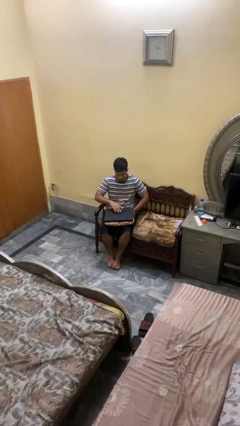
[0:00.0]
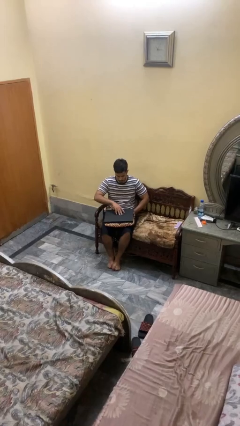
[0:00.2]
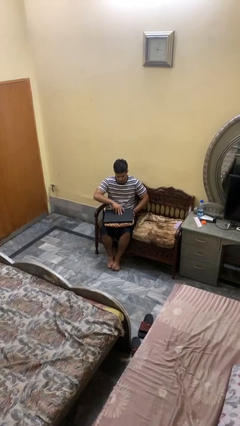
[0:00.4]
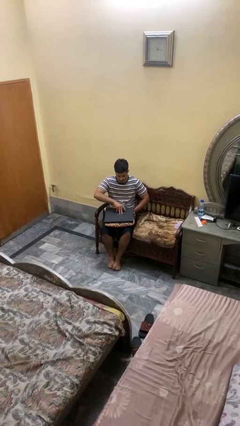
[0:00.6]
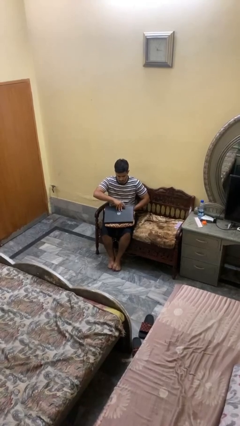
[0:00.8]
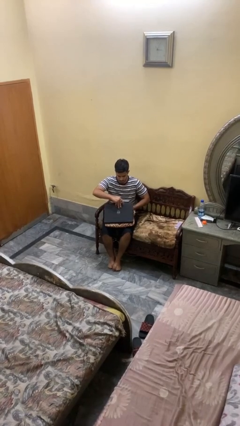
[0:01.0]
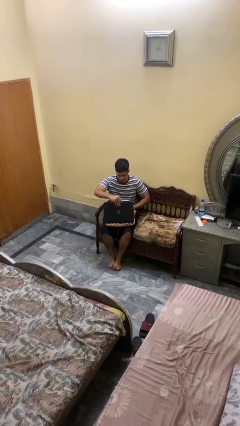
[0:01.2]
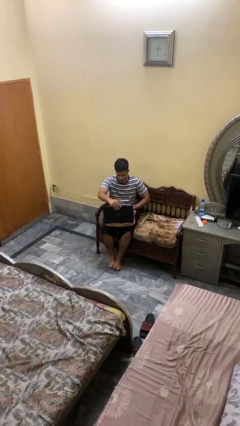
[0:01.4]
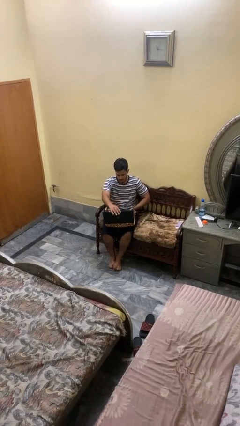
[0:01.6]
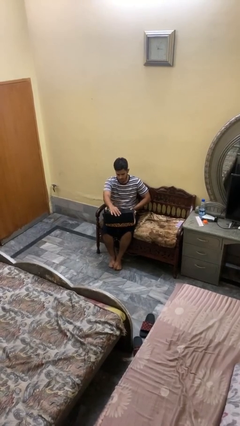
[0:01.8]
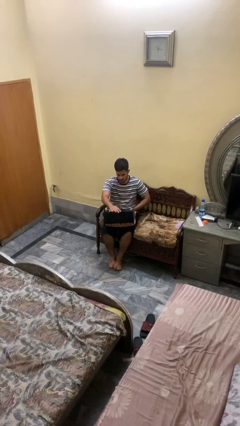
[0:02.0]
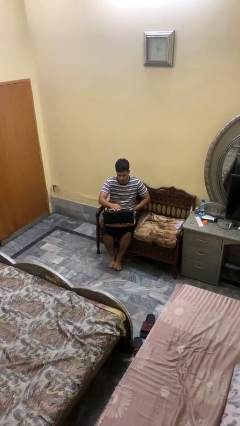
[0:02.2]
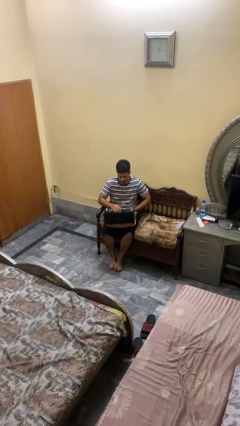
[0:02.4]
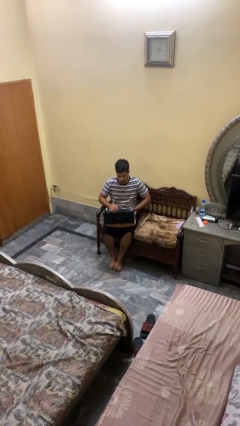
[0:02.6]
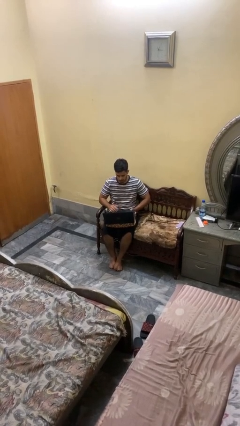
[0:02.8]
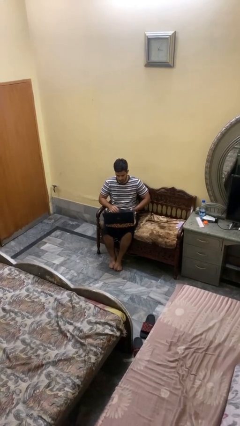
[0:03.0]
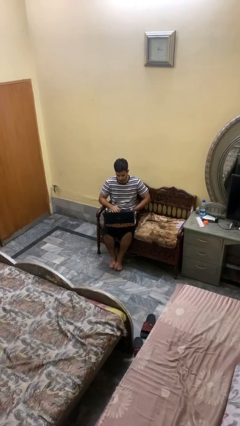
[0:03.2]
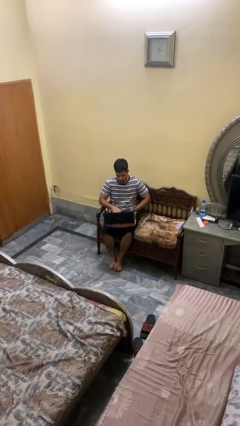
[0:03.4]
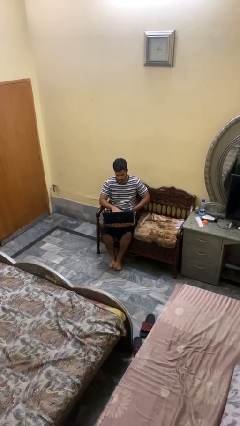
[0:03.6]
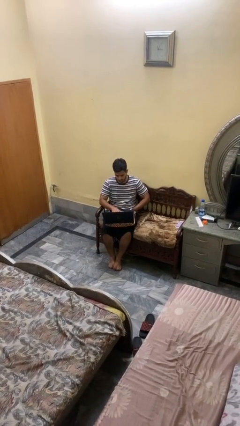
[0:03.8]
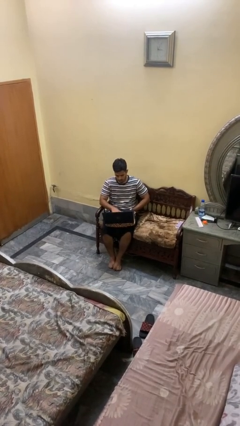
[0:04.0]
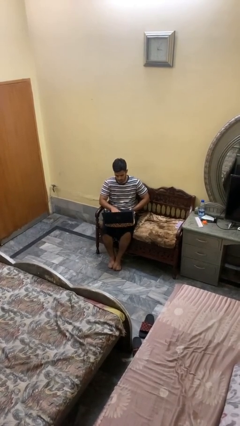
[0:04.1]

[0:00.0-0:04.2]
person opens laptop

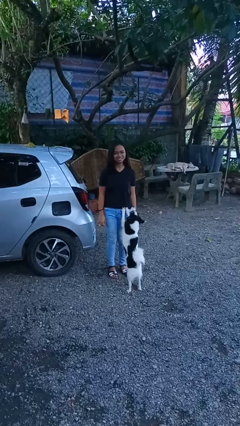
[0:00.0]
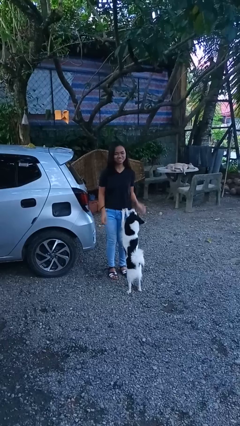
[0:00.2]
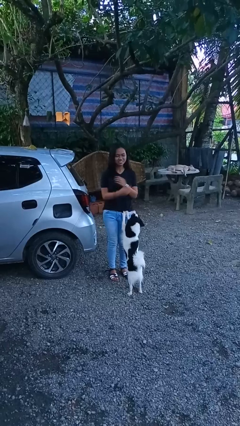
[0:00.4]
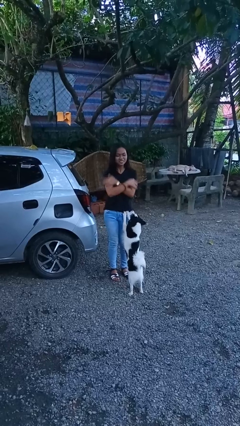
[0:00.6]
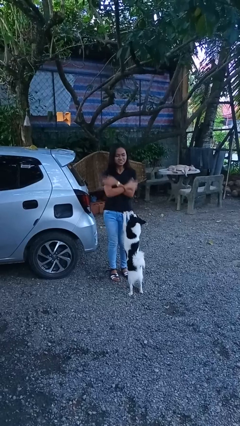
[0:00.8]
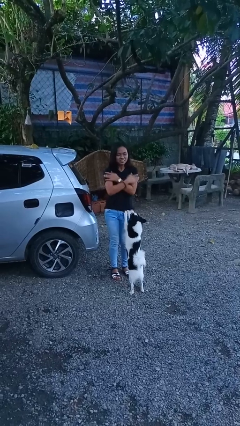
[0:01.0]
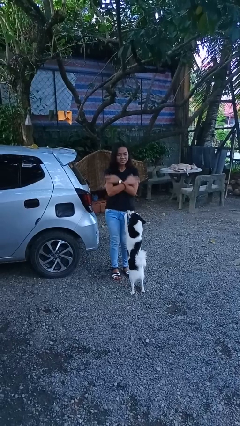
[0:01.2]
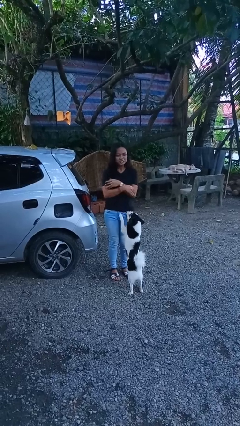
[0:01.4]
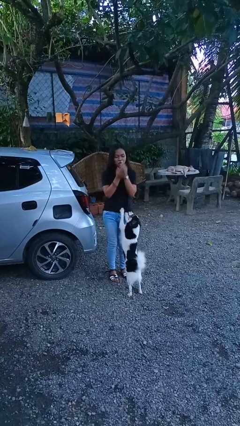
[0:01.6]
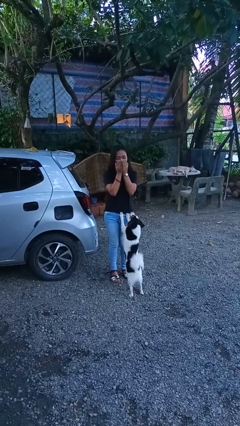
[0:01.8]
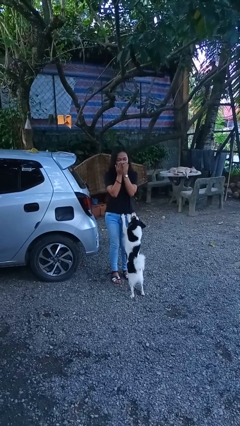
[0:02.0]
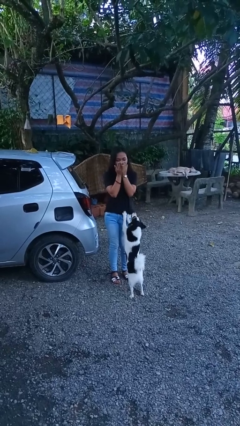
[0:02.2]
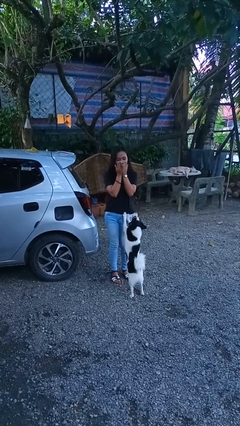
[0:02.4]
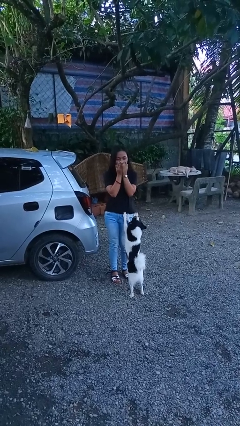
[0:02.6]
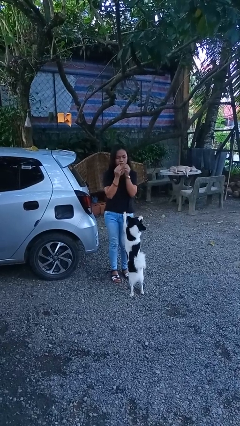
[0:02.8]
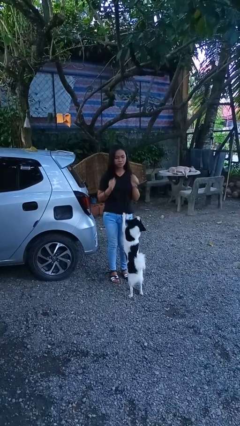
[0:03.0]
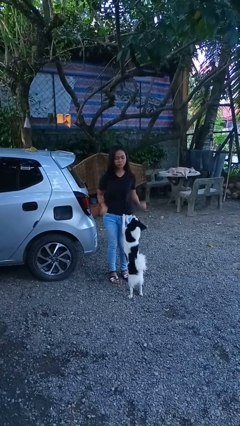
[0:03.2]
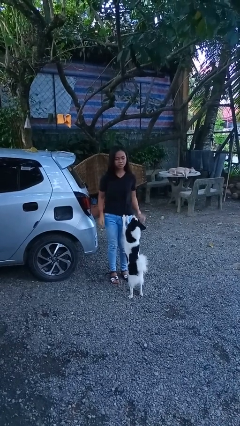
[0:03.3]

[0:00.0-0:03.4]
person blows into hands

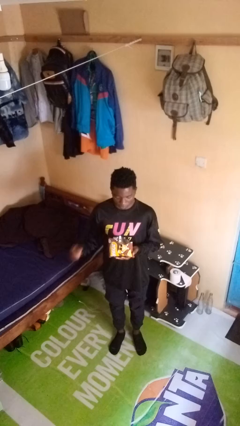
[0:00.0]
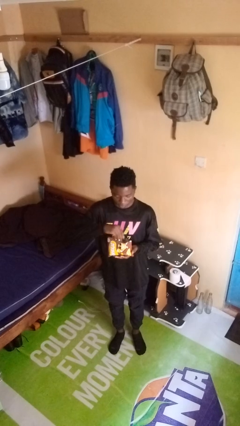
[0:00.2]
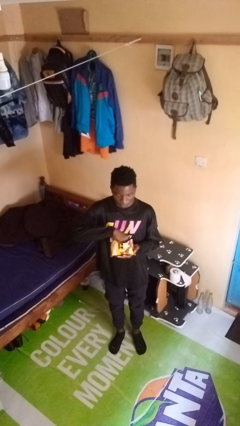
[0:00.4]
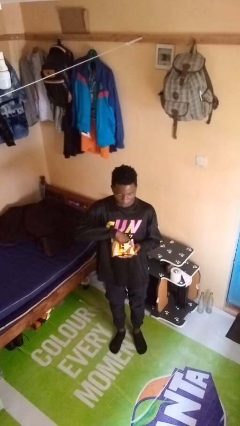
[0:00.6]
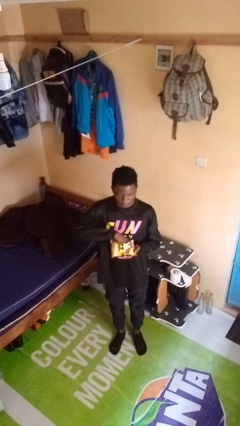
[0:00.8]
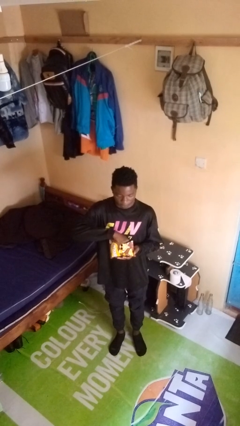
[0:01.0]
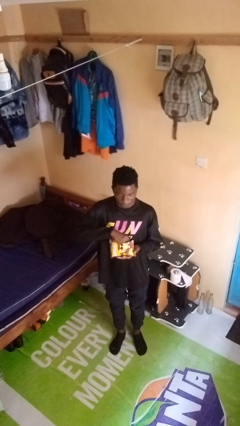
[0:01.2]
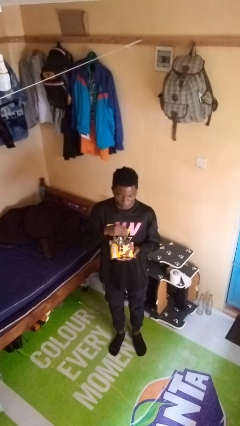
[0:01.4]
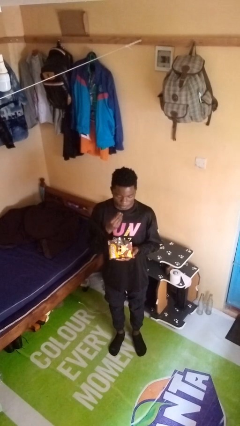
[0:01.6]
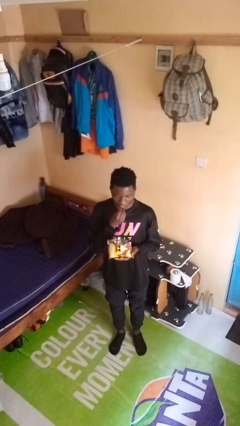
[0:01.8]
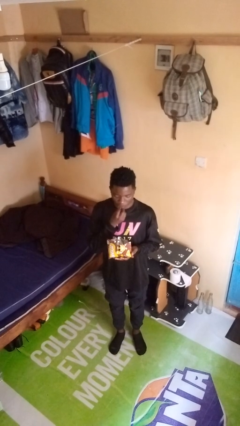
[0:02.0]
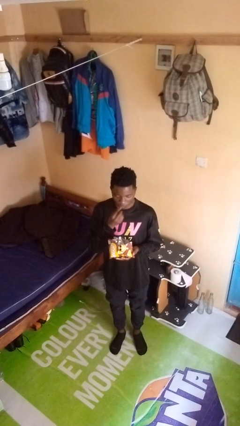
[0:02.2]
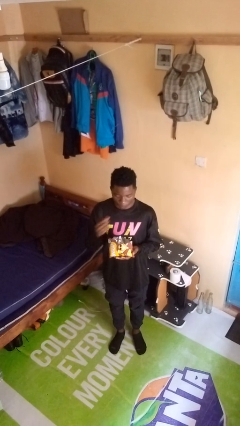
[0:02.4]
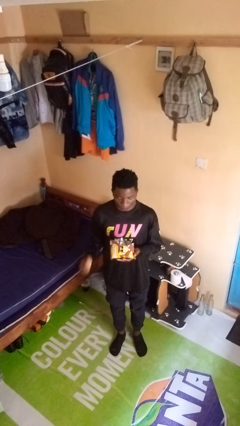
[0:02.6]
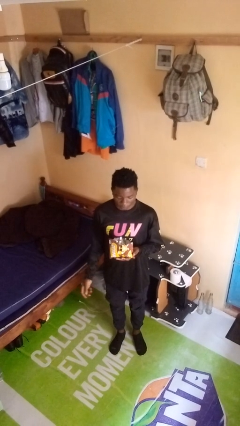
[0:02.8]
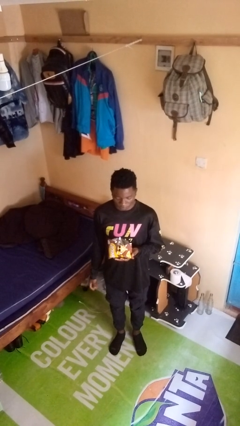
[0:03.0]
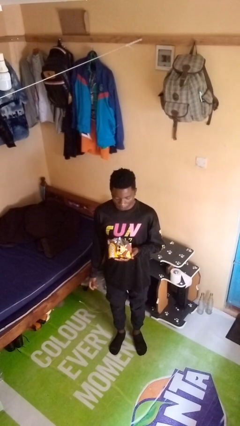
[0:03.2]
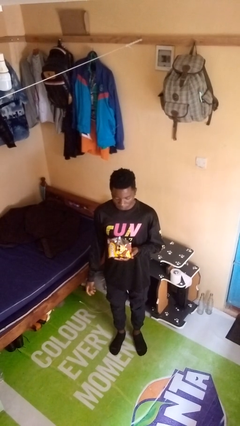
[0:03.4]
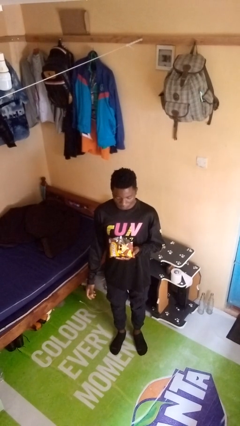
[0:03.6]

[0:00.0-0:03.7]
person eats snack from bag

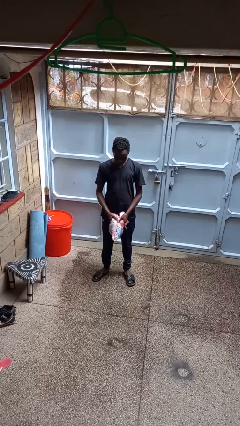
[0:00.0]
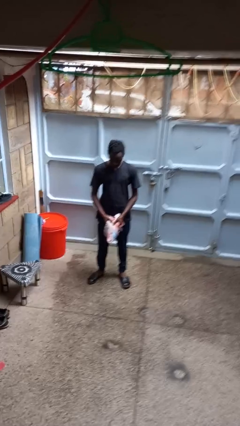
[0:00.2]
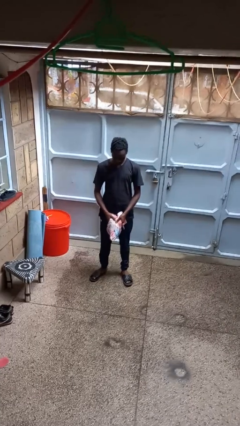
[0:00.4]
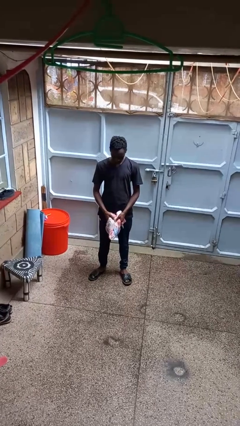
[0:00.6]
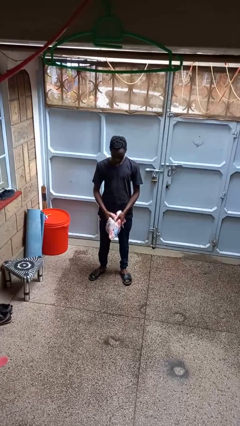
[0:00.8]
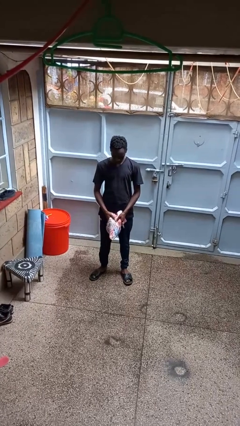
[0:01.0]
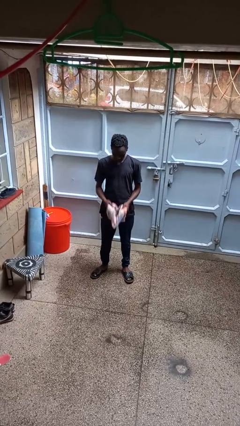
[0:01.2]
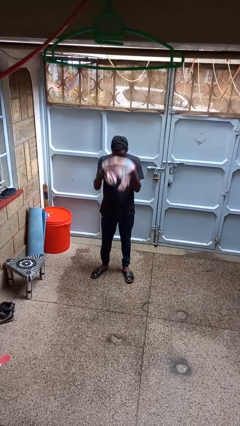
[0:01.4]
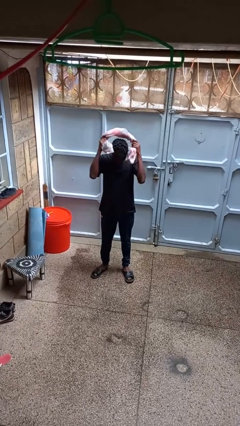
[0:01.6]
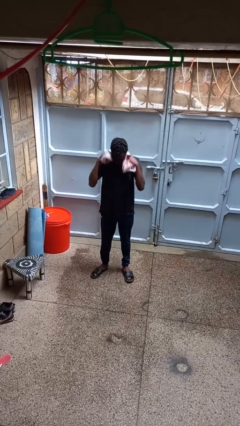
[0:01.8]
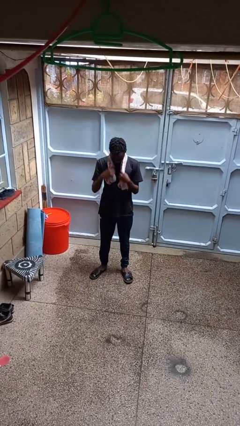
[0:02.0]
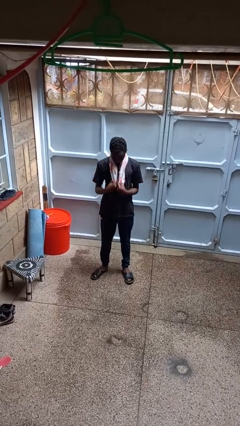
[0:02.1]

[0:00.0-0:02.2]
person puts on scarf

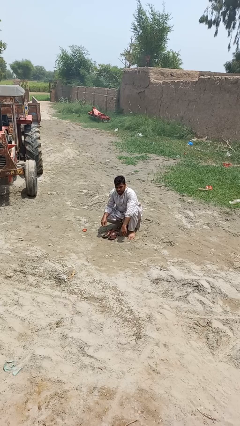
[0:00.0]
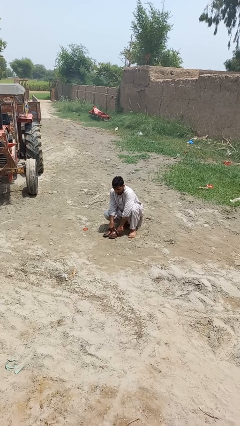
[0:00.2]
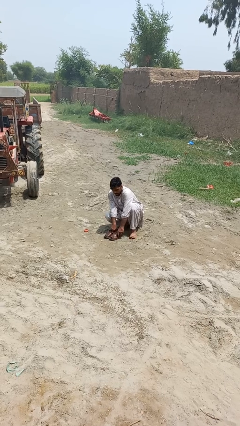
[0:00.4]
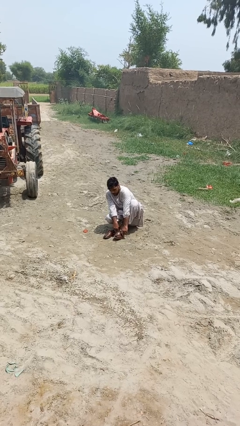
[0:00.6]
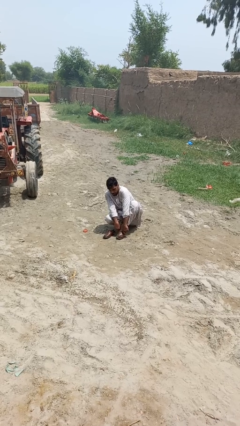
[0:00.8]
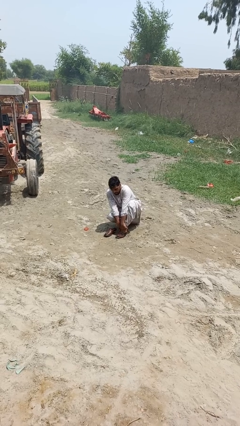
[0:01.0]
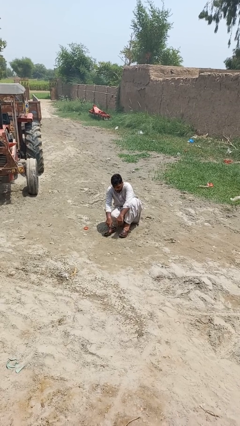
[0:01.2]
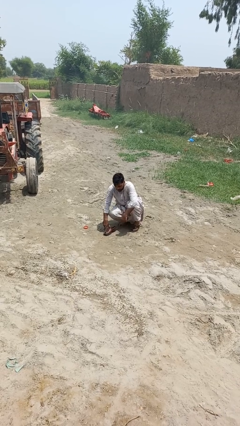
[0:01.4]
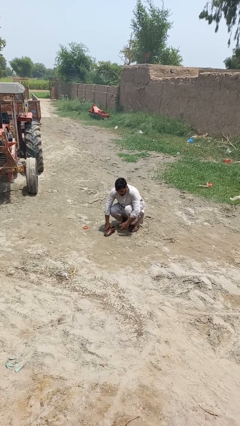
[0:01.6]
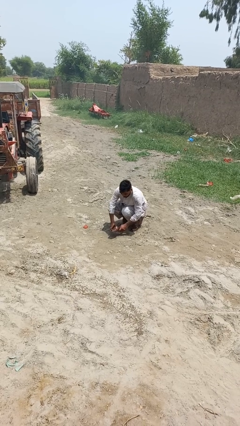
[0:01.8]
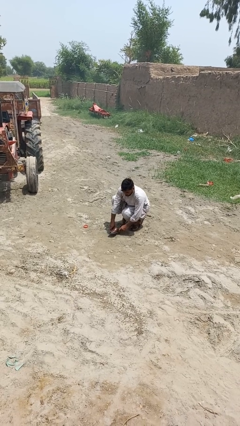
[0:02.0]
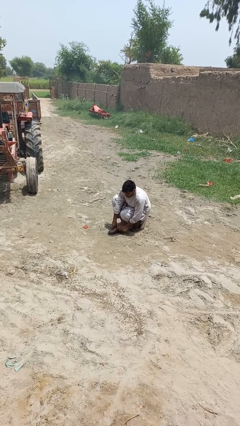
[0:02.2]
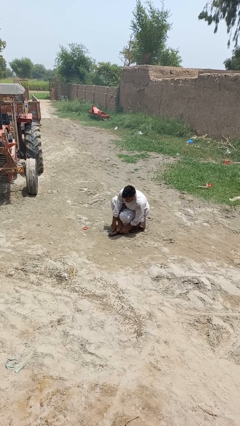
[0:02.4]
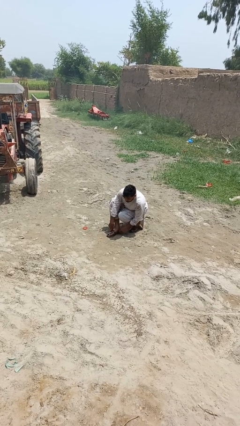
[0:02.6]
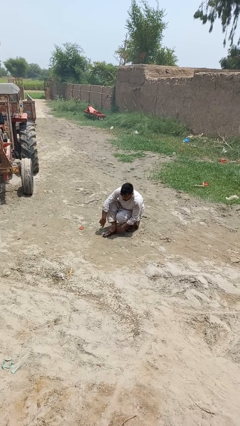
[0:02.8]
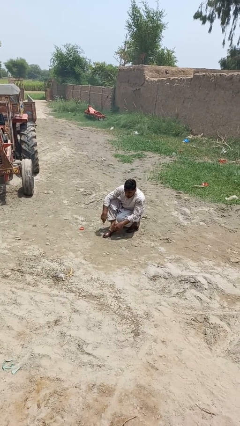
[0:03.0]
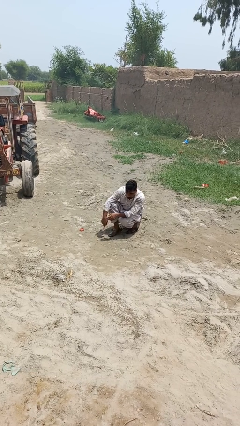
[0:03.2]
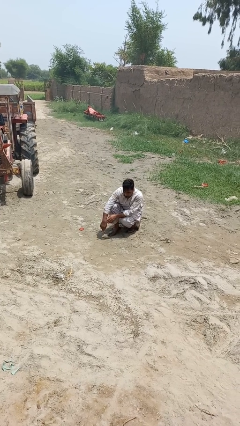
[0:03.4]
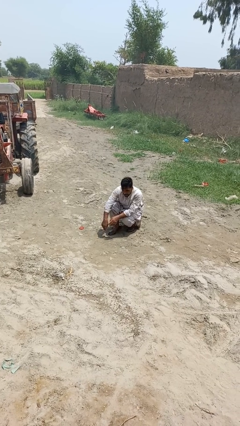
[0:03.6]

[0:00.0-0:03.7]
person puts on shoes

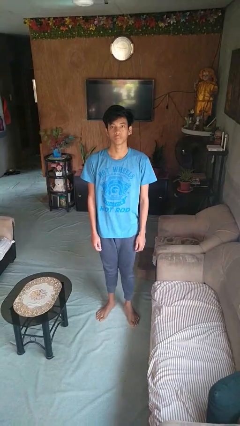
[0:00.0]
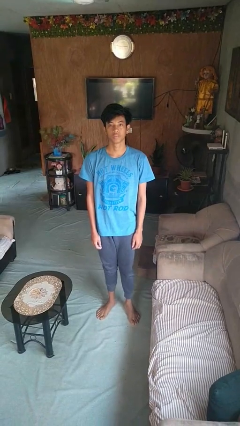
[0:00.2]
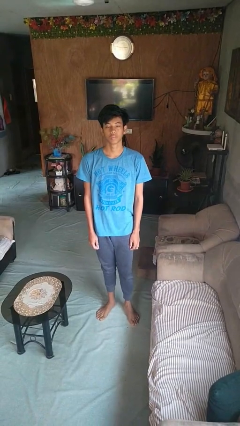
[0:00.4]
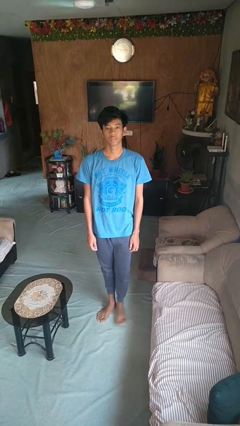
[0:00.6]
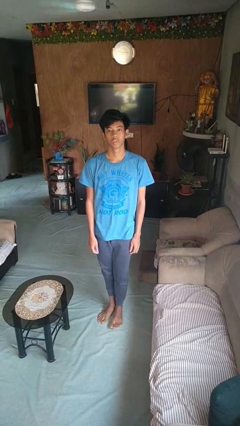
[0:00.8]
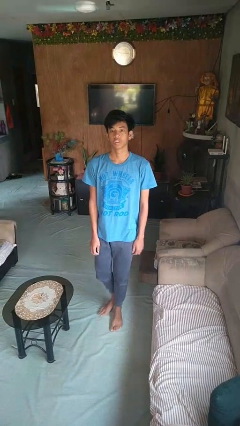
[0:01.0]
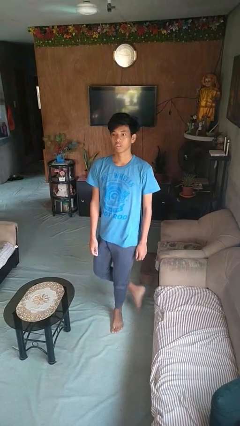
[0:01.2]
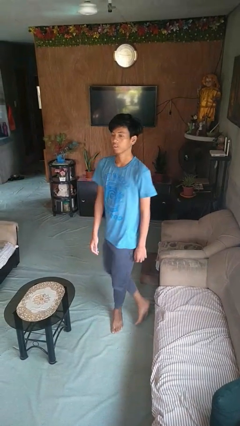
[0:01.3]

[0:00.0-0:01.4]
person twirls
